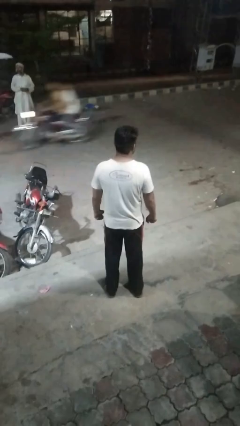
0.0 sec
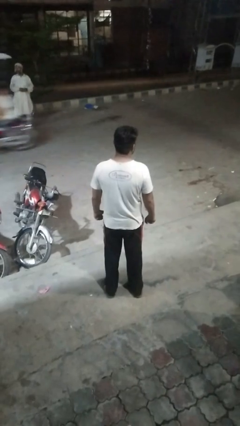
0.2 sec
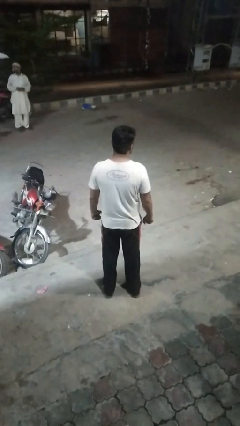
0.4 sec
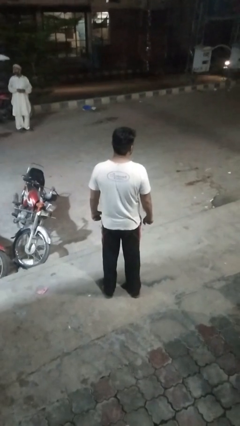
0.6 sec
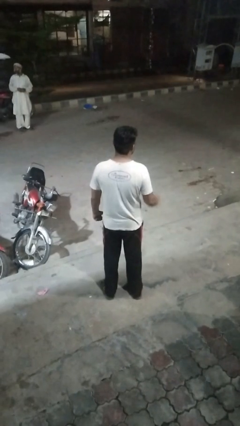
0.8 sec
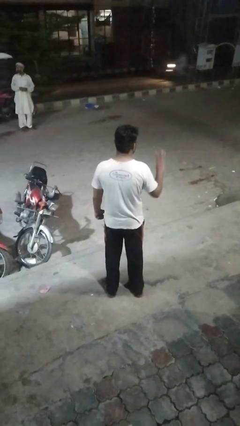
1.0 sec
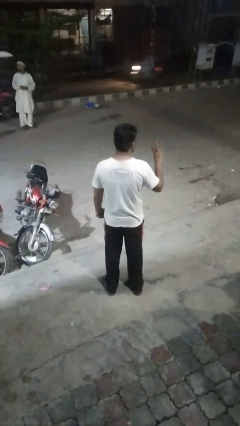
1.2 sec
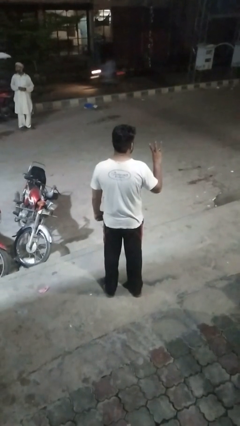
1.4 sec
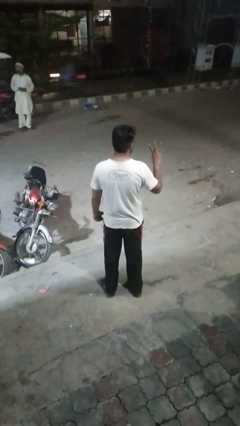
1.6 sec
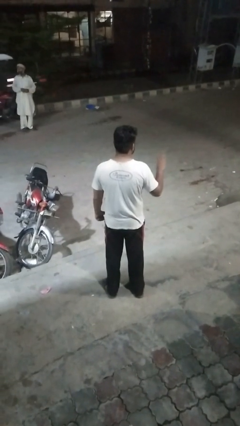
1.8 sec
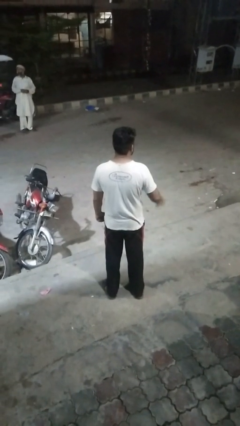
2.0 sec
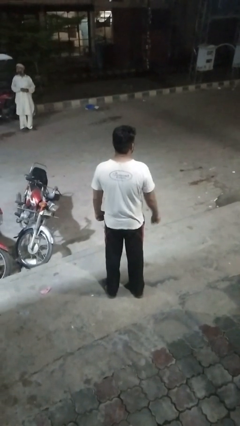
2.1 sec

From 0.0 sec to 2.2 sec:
person gestures number three

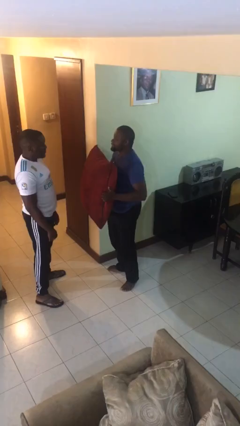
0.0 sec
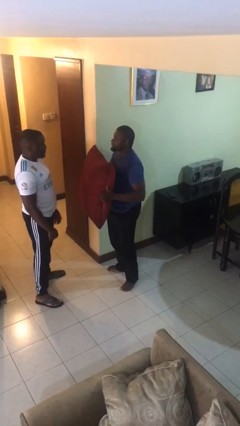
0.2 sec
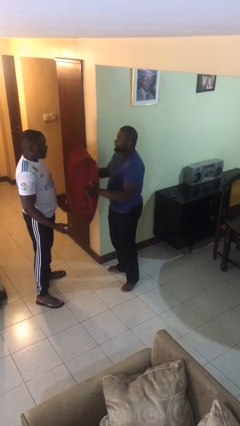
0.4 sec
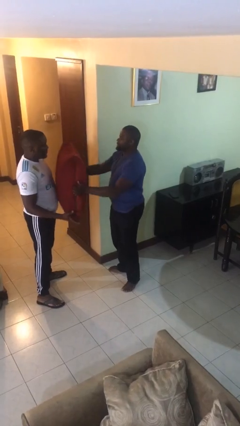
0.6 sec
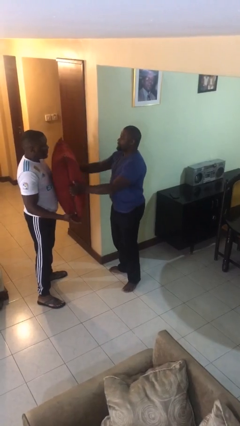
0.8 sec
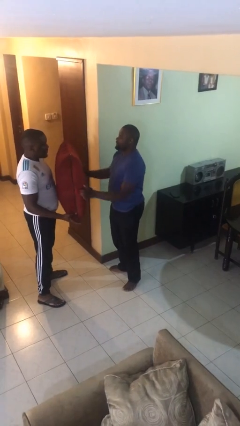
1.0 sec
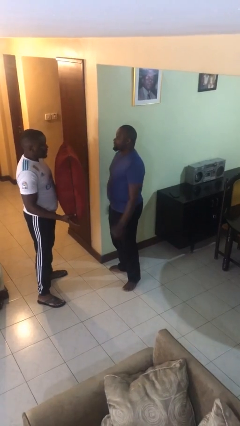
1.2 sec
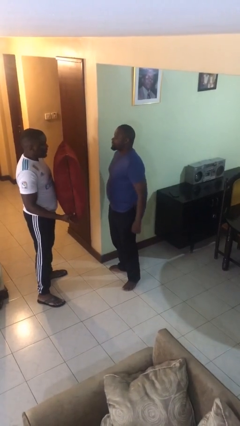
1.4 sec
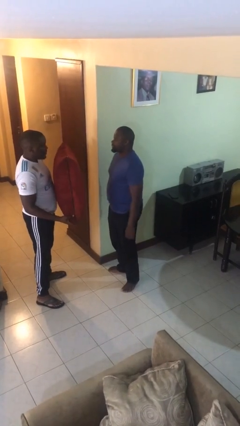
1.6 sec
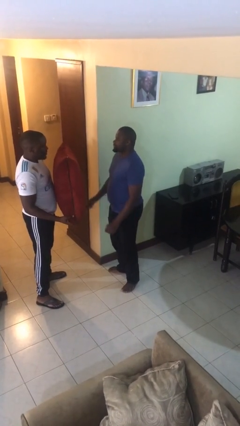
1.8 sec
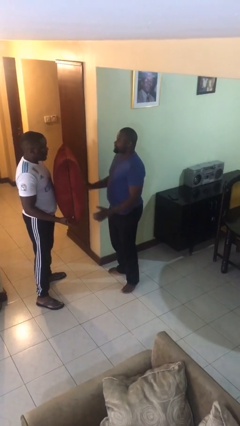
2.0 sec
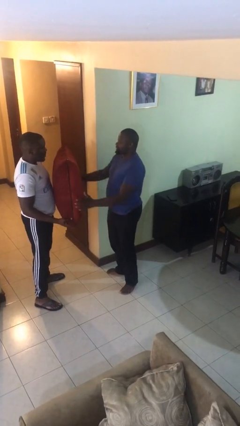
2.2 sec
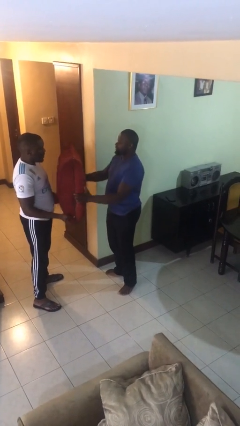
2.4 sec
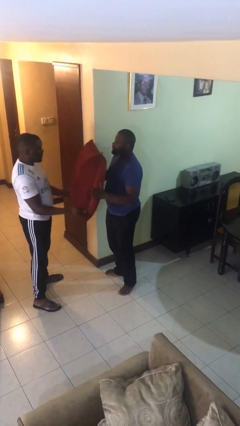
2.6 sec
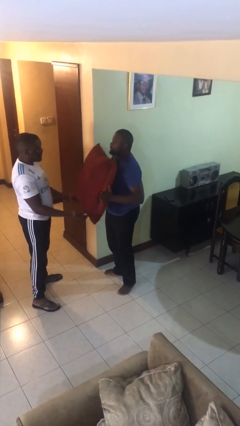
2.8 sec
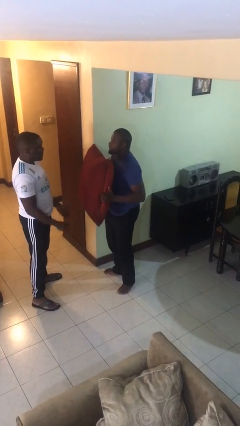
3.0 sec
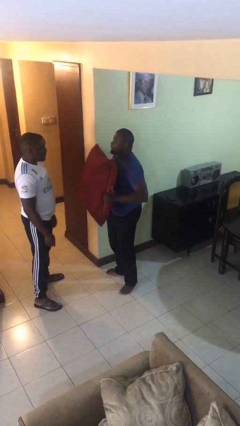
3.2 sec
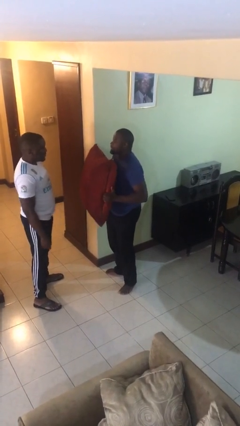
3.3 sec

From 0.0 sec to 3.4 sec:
person transfers object to person

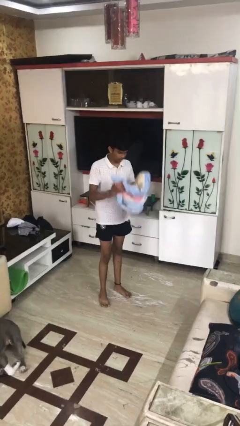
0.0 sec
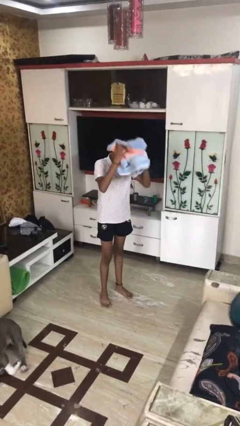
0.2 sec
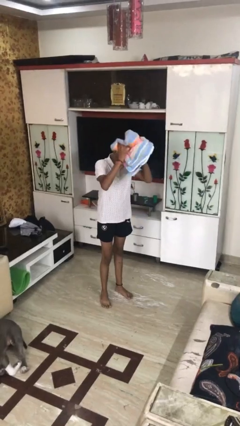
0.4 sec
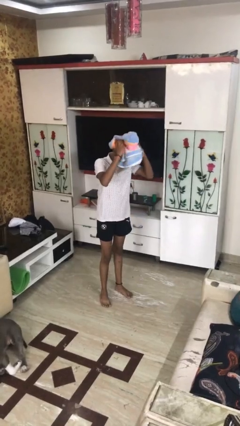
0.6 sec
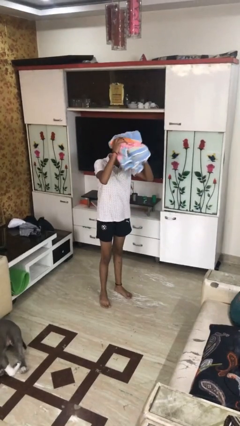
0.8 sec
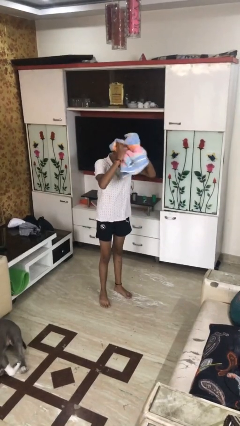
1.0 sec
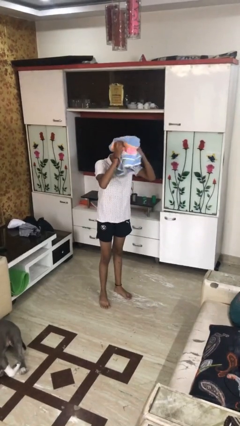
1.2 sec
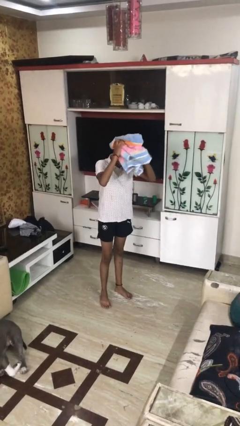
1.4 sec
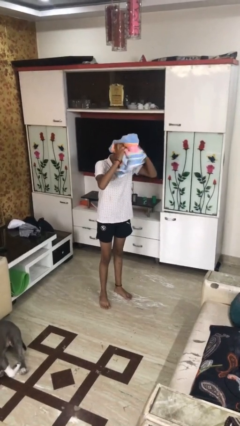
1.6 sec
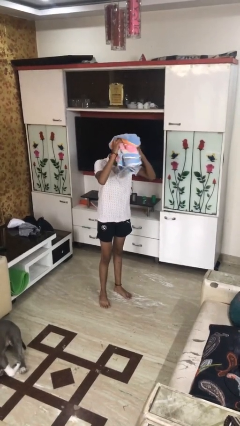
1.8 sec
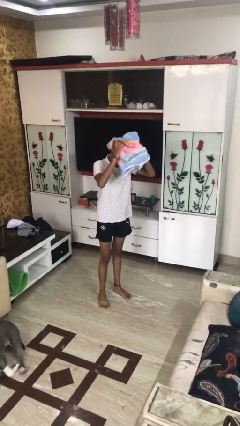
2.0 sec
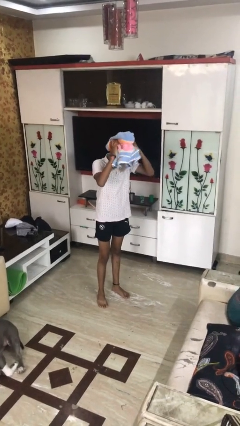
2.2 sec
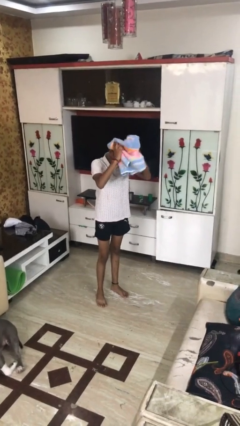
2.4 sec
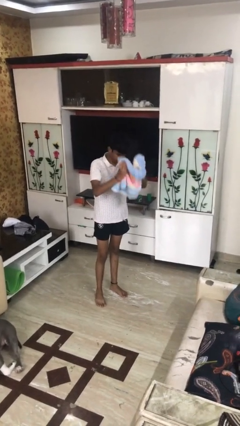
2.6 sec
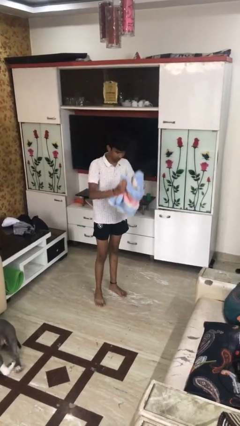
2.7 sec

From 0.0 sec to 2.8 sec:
person dries hair with towel

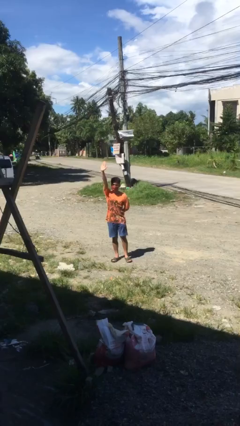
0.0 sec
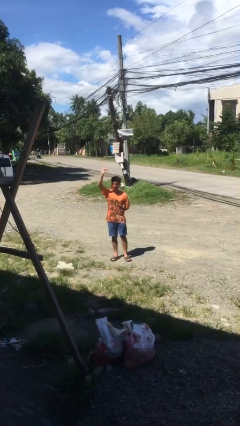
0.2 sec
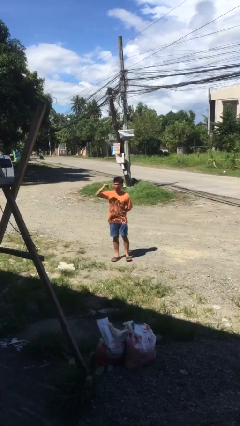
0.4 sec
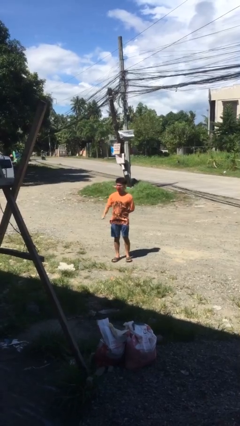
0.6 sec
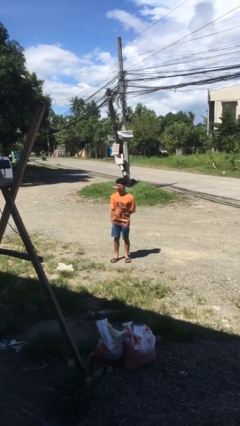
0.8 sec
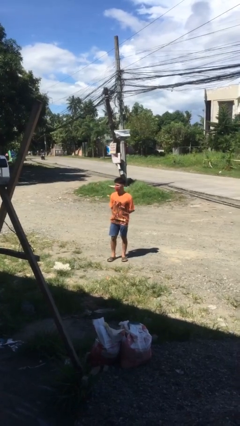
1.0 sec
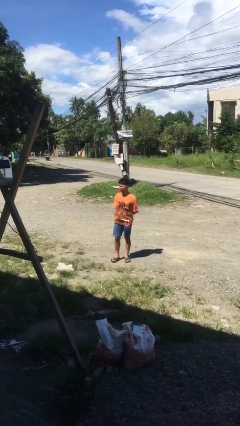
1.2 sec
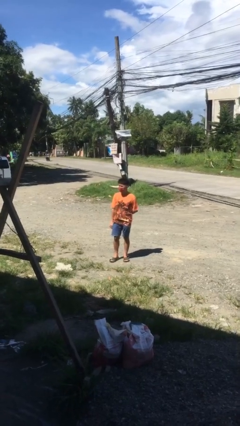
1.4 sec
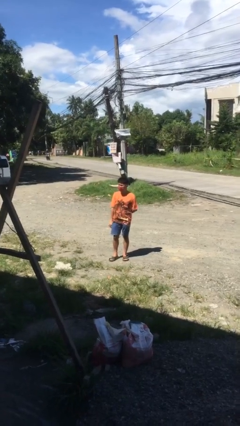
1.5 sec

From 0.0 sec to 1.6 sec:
person gestures lower hand

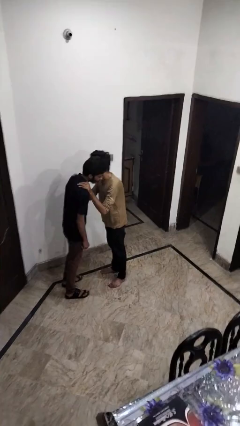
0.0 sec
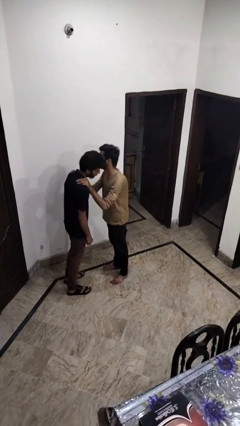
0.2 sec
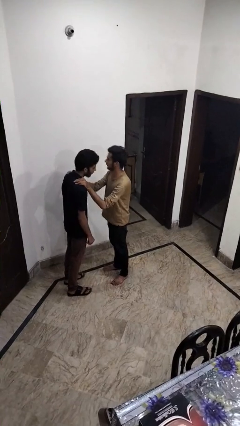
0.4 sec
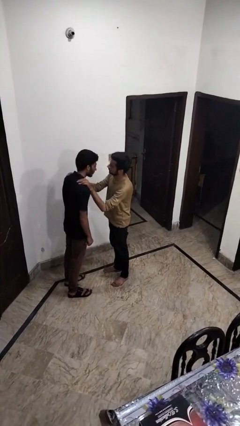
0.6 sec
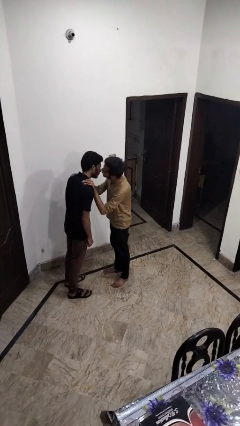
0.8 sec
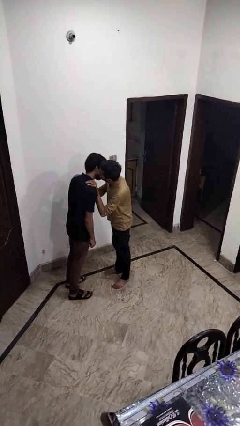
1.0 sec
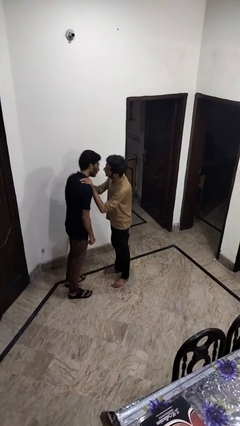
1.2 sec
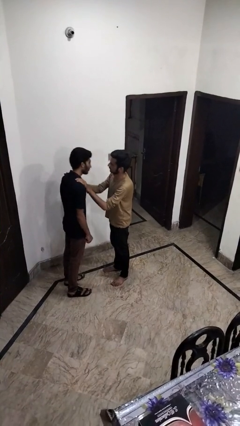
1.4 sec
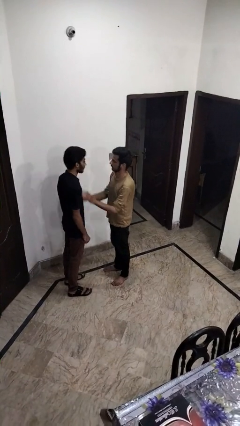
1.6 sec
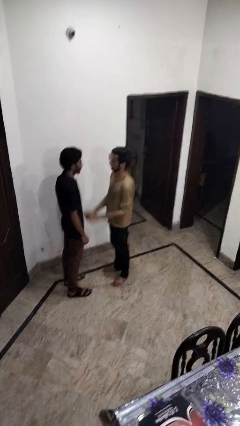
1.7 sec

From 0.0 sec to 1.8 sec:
person kisses cheek of person

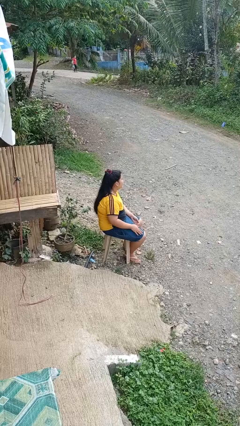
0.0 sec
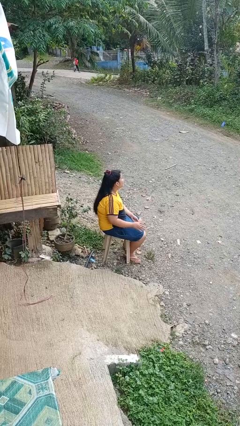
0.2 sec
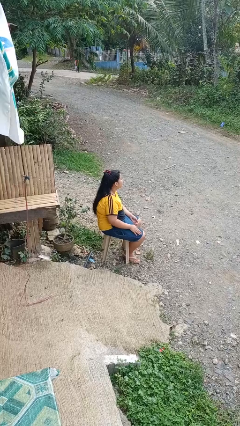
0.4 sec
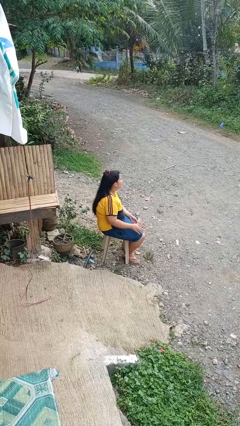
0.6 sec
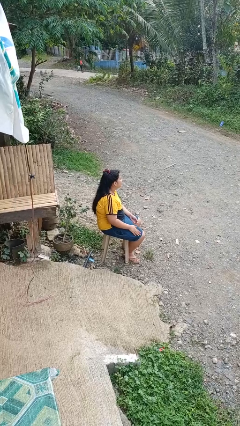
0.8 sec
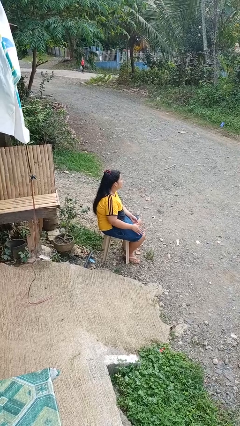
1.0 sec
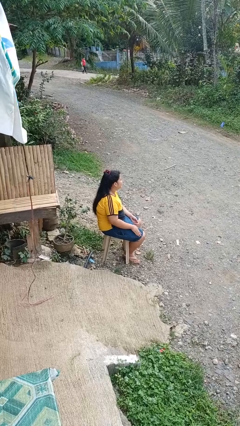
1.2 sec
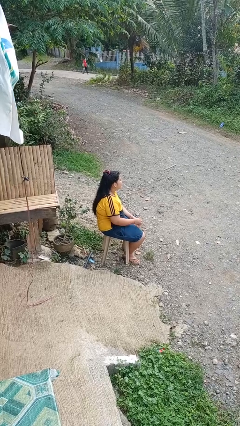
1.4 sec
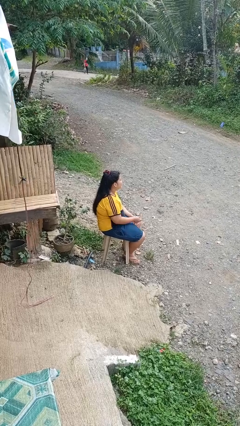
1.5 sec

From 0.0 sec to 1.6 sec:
person slaps hands on thighs

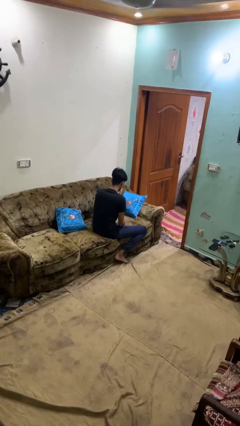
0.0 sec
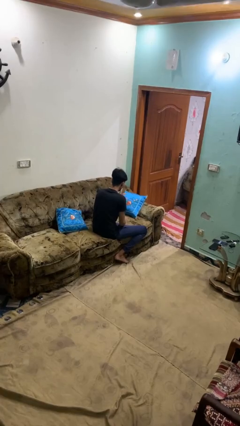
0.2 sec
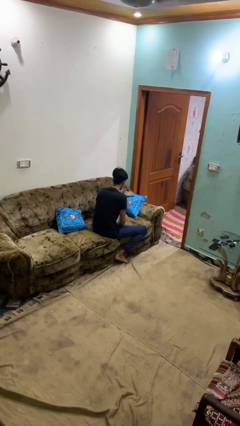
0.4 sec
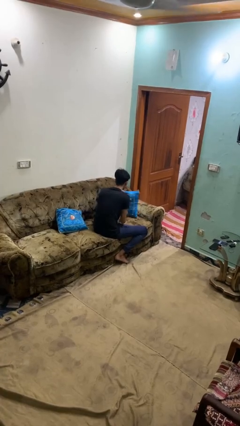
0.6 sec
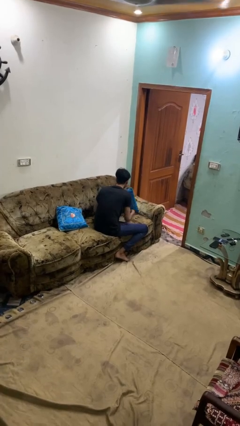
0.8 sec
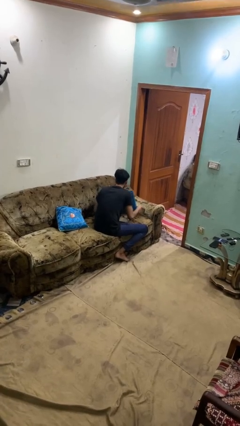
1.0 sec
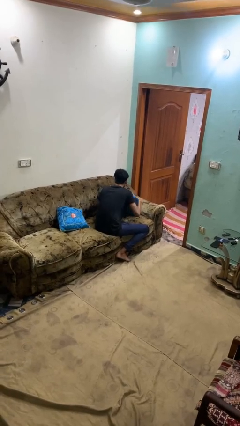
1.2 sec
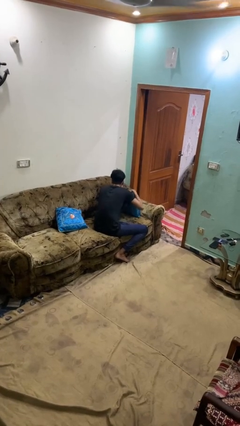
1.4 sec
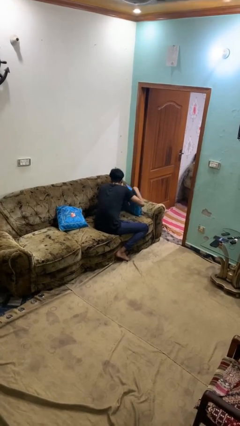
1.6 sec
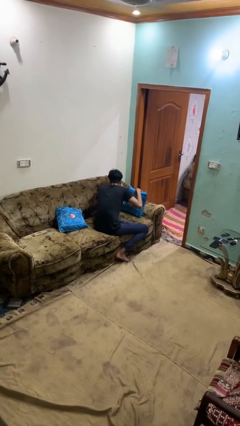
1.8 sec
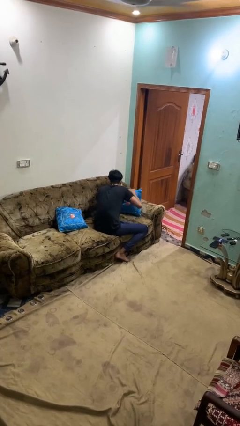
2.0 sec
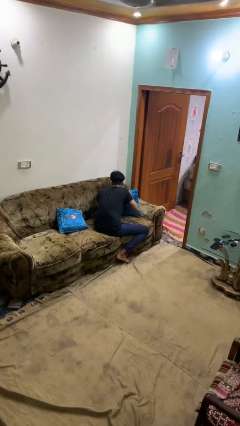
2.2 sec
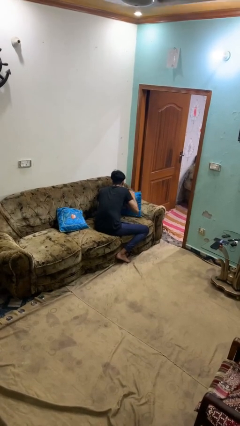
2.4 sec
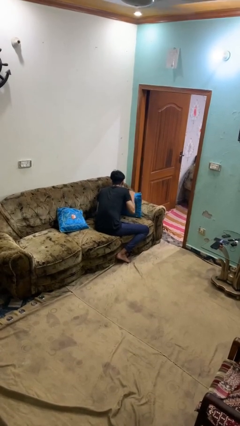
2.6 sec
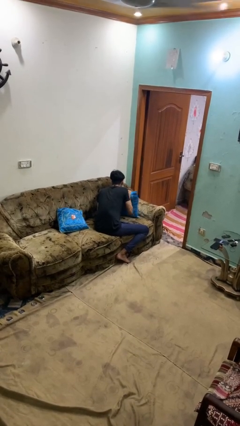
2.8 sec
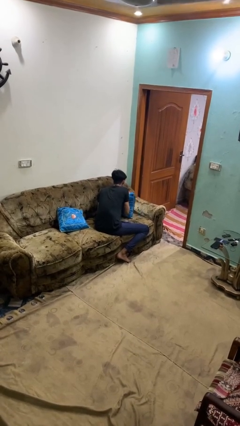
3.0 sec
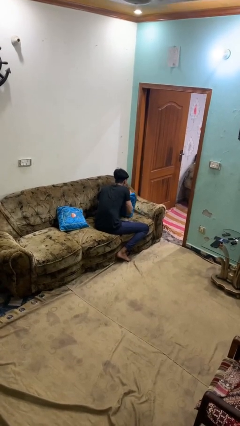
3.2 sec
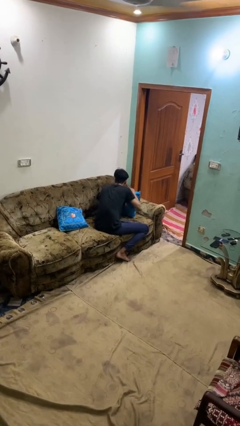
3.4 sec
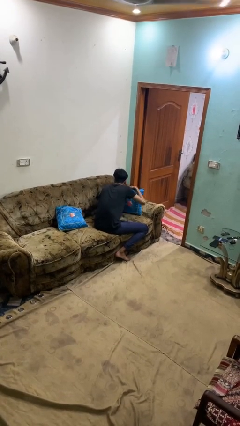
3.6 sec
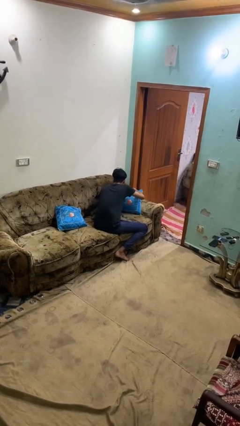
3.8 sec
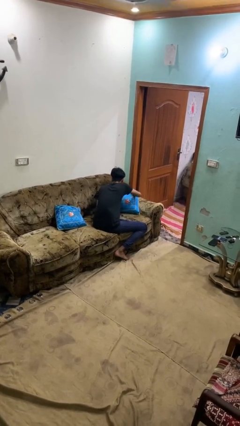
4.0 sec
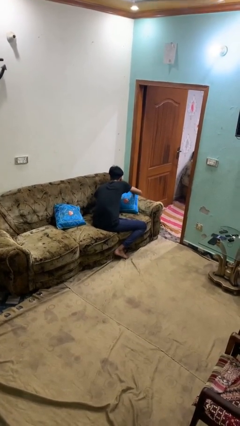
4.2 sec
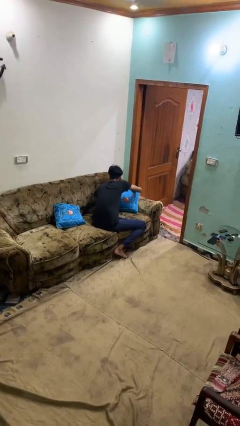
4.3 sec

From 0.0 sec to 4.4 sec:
person searches in couch
